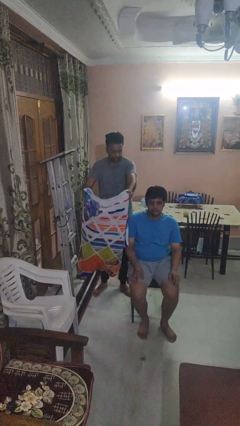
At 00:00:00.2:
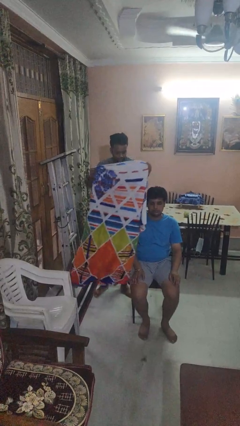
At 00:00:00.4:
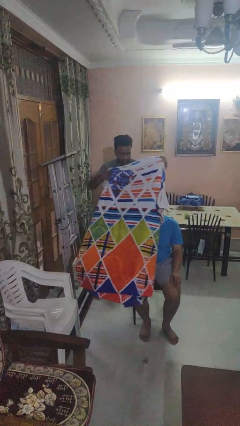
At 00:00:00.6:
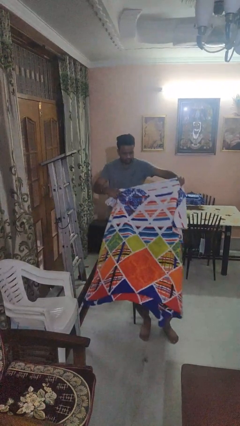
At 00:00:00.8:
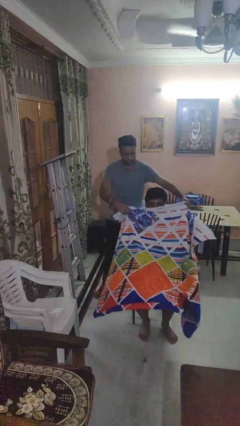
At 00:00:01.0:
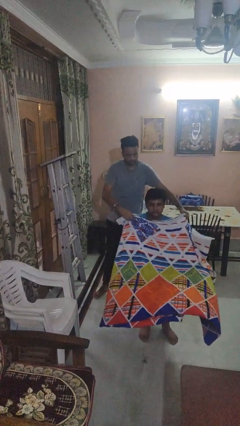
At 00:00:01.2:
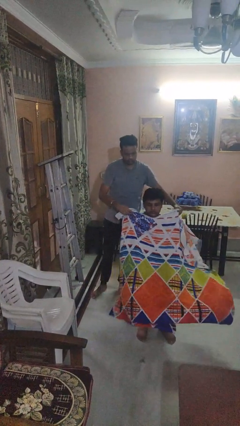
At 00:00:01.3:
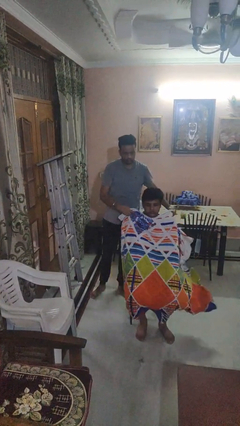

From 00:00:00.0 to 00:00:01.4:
person covers friend with blanket

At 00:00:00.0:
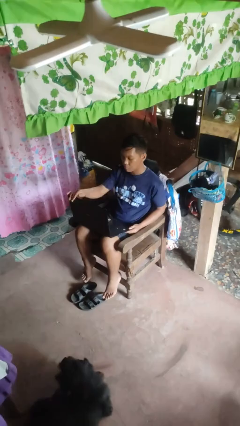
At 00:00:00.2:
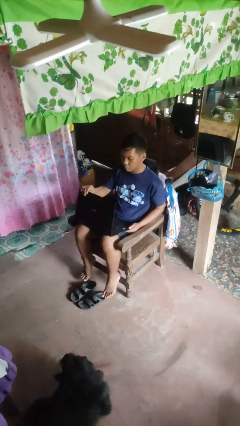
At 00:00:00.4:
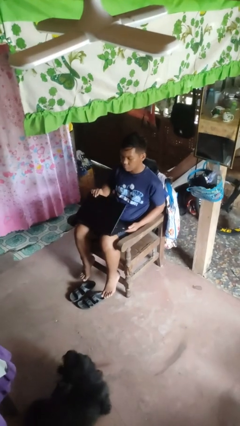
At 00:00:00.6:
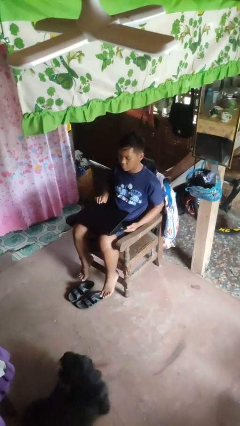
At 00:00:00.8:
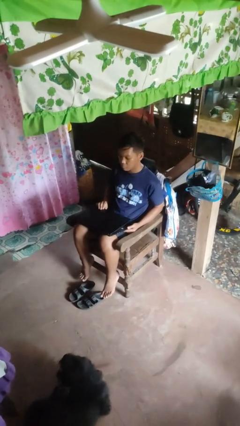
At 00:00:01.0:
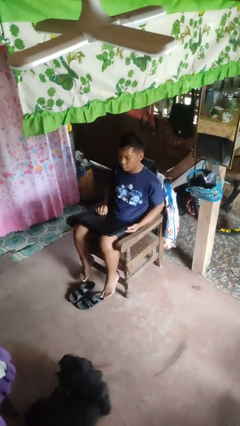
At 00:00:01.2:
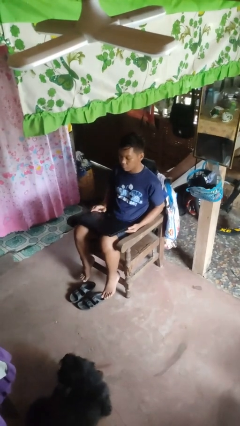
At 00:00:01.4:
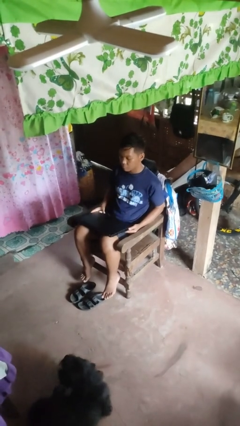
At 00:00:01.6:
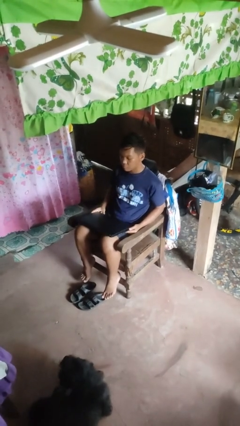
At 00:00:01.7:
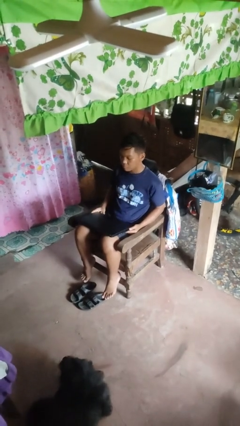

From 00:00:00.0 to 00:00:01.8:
person closes laptop

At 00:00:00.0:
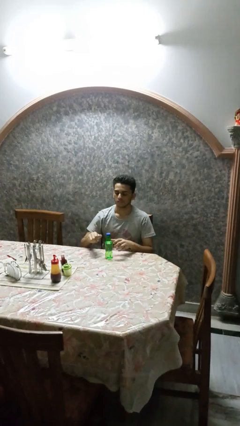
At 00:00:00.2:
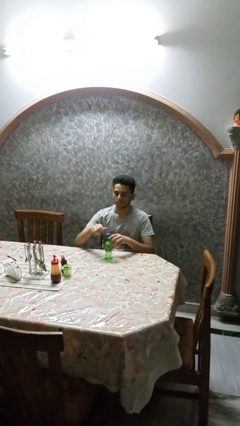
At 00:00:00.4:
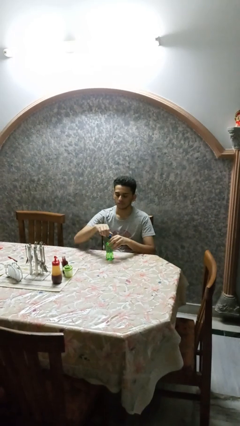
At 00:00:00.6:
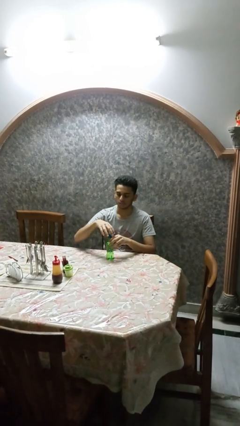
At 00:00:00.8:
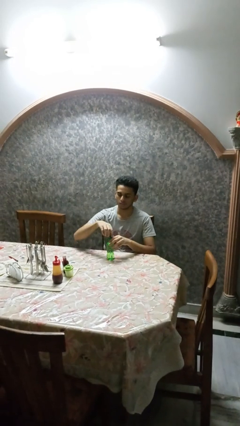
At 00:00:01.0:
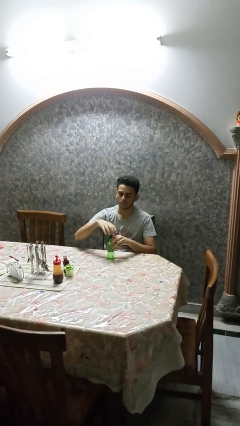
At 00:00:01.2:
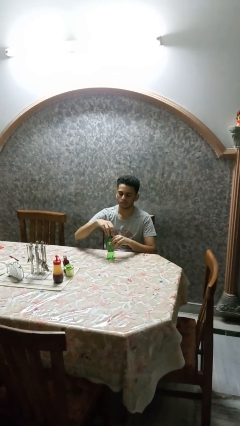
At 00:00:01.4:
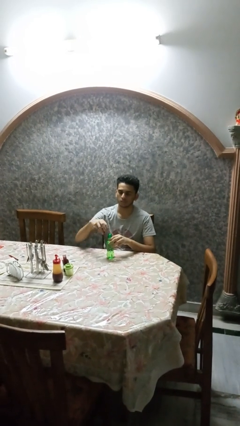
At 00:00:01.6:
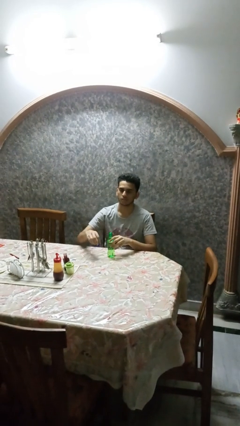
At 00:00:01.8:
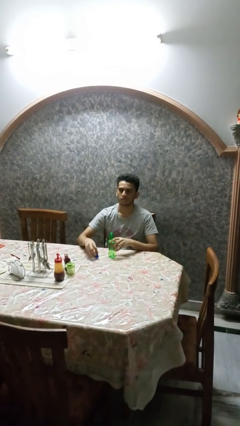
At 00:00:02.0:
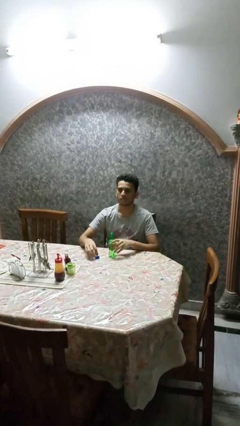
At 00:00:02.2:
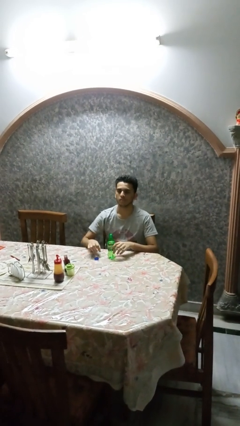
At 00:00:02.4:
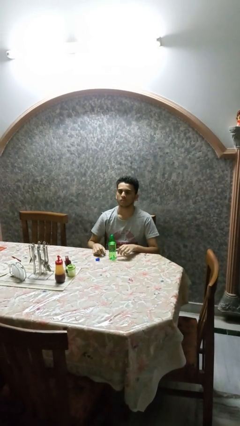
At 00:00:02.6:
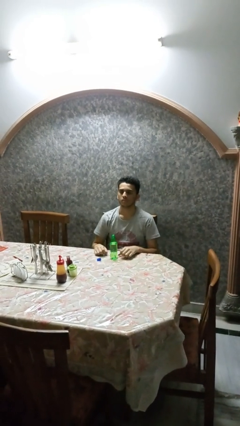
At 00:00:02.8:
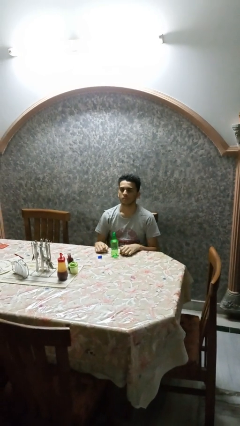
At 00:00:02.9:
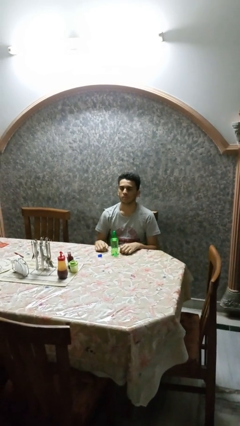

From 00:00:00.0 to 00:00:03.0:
person unscrews lid from bottle

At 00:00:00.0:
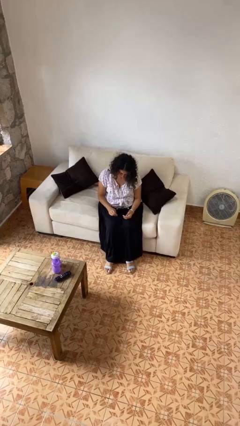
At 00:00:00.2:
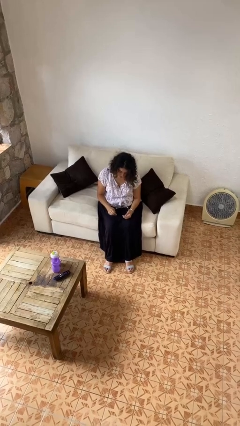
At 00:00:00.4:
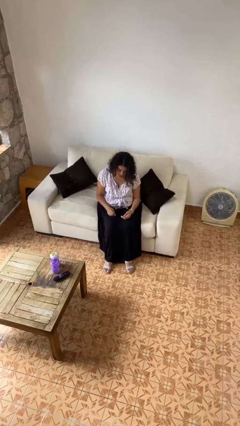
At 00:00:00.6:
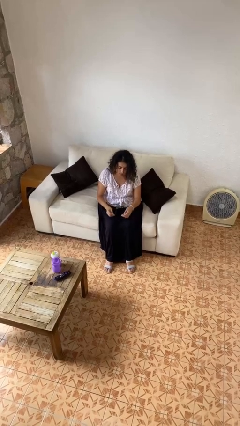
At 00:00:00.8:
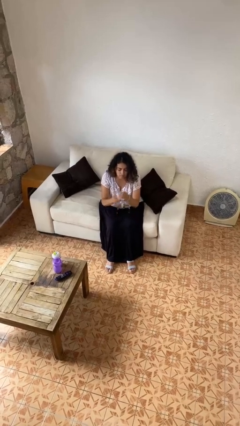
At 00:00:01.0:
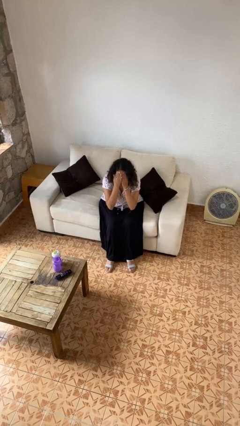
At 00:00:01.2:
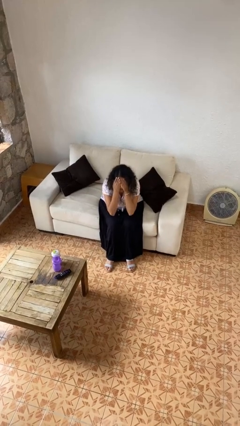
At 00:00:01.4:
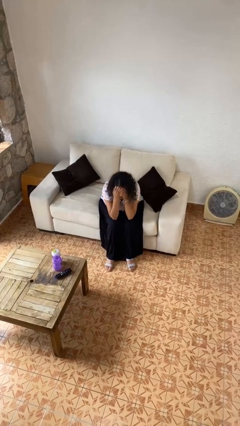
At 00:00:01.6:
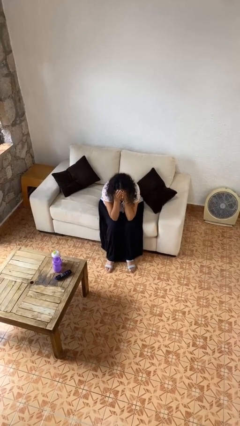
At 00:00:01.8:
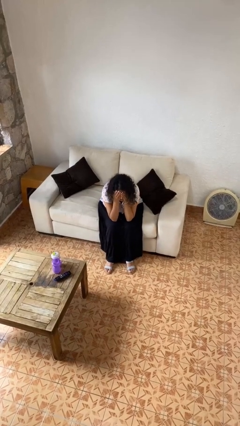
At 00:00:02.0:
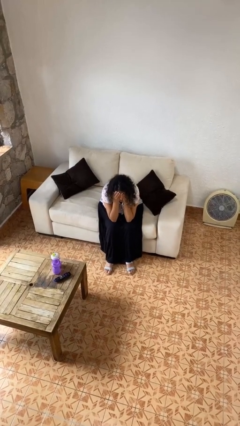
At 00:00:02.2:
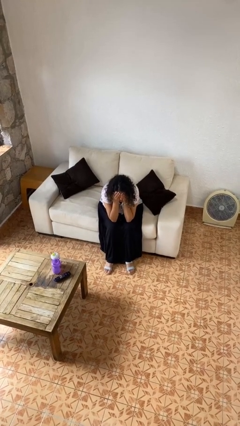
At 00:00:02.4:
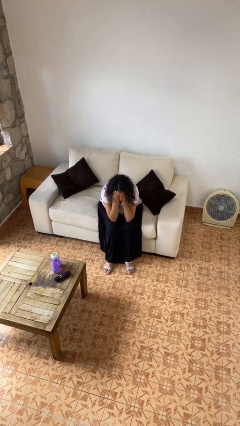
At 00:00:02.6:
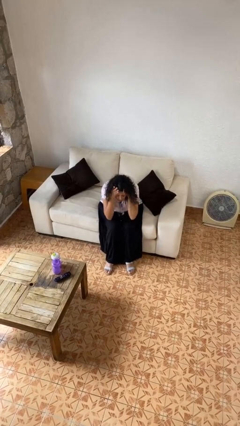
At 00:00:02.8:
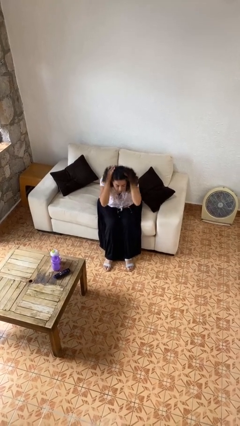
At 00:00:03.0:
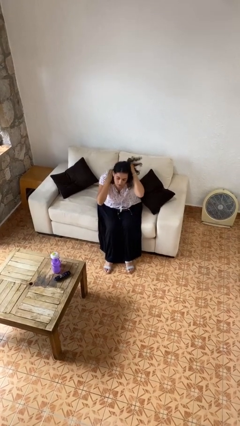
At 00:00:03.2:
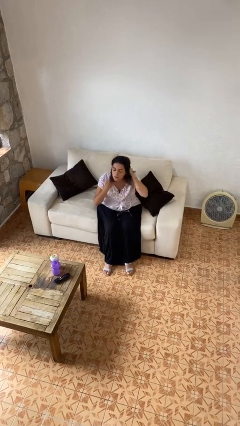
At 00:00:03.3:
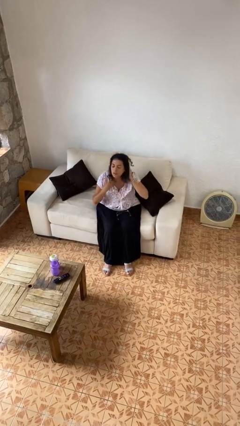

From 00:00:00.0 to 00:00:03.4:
person covers face with hands

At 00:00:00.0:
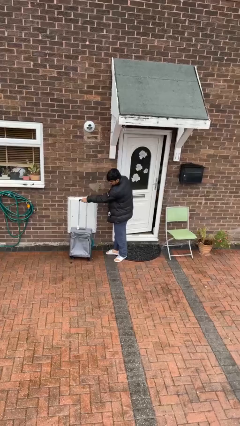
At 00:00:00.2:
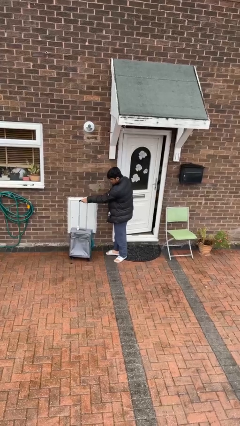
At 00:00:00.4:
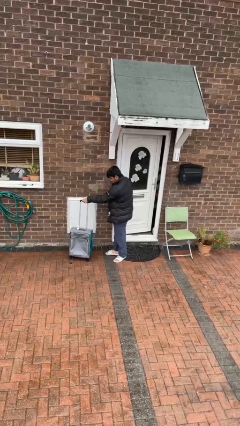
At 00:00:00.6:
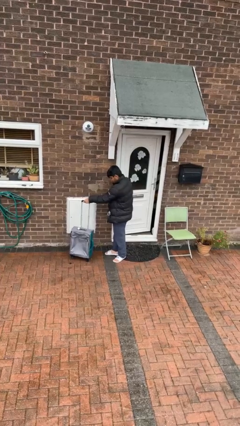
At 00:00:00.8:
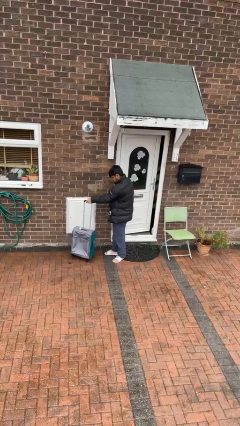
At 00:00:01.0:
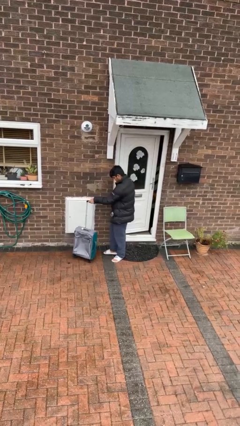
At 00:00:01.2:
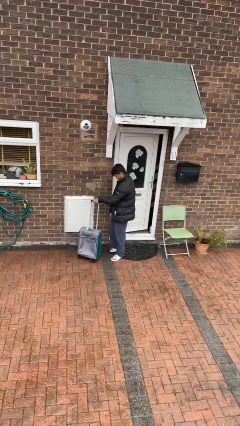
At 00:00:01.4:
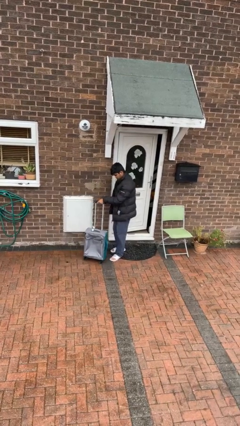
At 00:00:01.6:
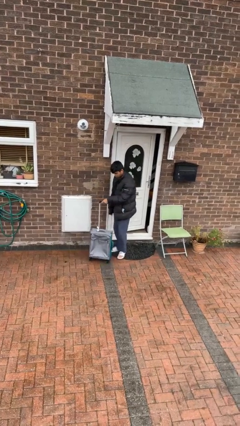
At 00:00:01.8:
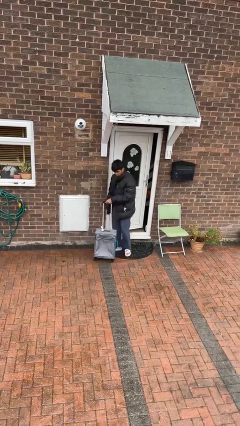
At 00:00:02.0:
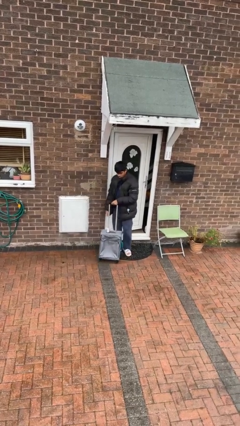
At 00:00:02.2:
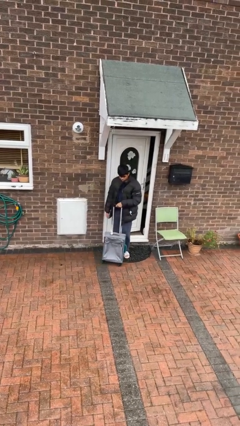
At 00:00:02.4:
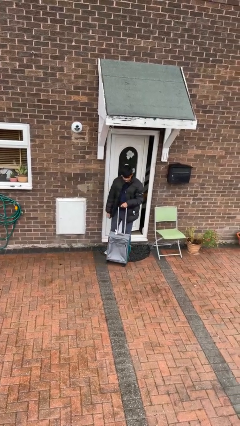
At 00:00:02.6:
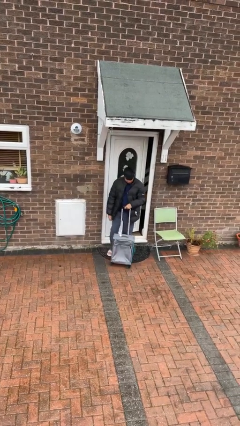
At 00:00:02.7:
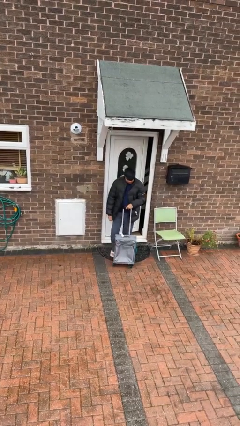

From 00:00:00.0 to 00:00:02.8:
person pulls wheeled cart

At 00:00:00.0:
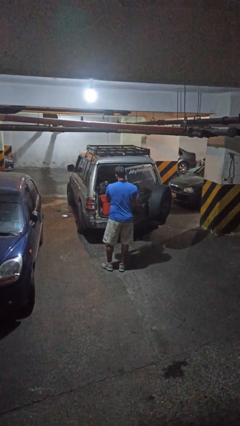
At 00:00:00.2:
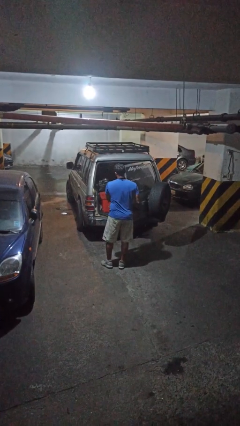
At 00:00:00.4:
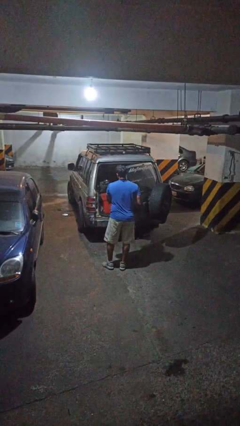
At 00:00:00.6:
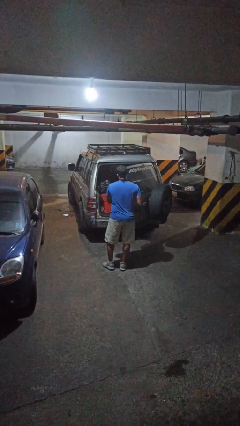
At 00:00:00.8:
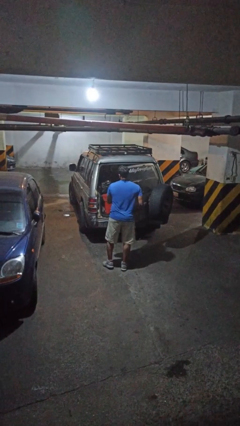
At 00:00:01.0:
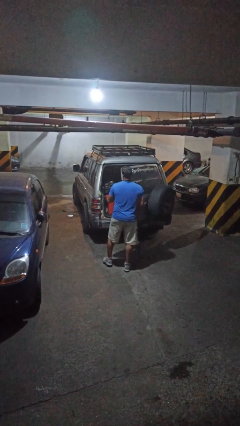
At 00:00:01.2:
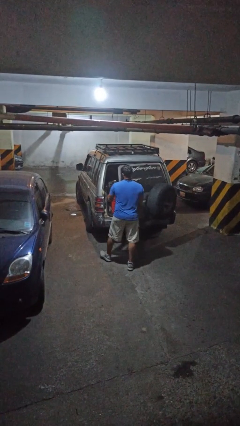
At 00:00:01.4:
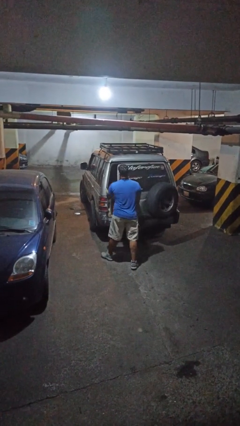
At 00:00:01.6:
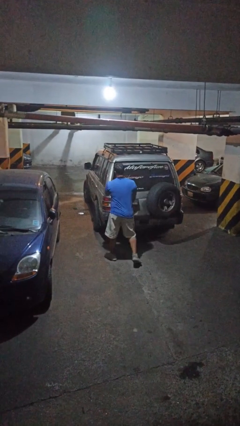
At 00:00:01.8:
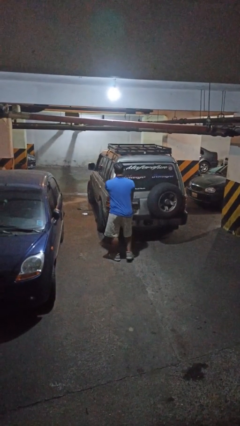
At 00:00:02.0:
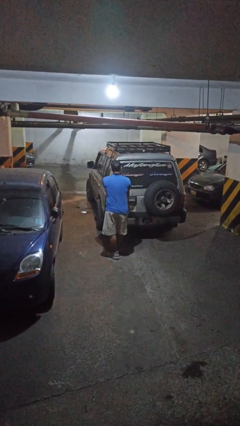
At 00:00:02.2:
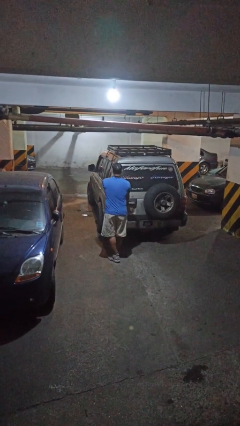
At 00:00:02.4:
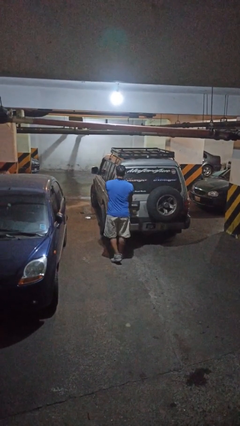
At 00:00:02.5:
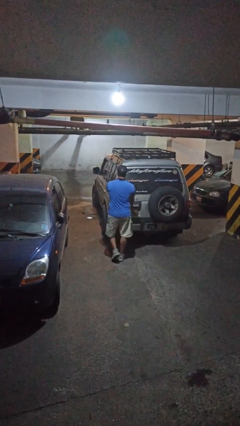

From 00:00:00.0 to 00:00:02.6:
person closes car trunk

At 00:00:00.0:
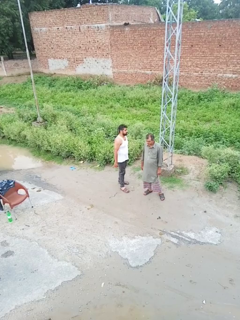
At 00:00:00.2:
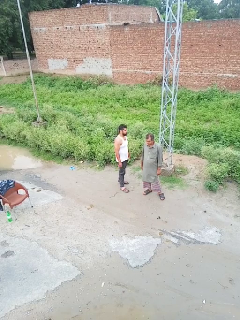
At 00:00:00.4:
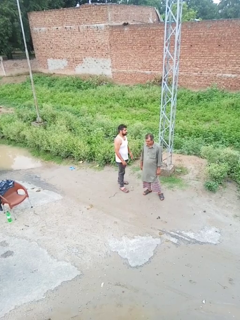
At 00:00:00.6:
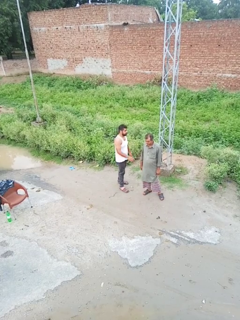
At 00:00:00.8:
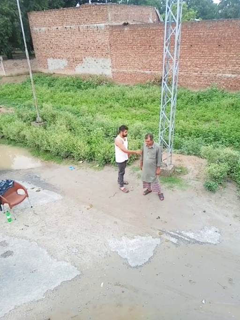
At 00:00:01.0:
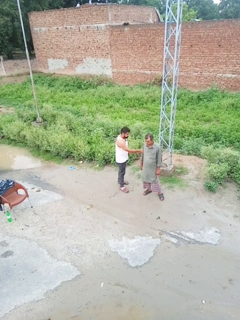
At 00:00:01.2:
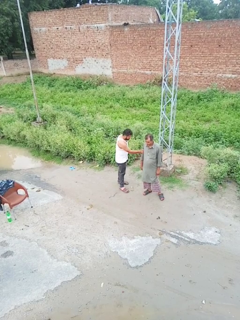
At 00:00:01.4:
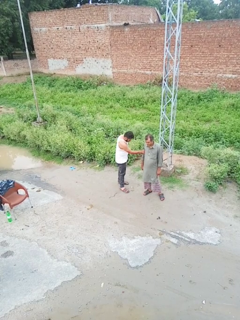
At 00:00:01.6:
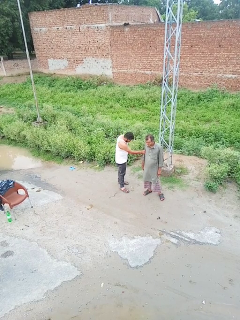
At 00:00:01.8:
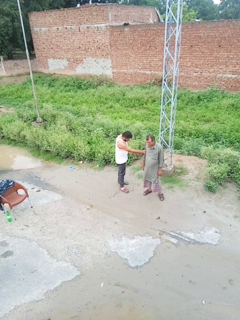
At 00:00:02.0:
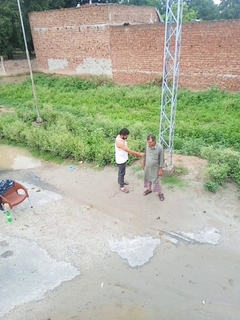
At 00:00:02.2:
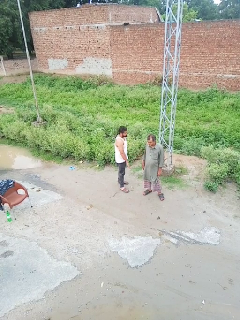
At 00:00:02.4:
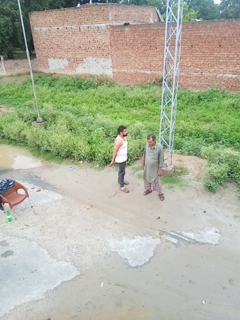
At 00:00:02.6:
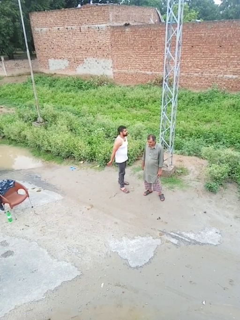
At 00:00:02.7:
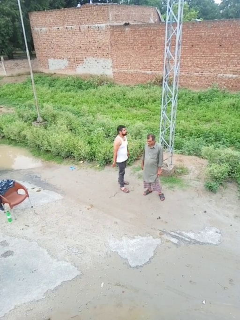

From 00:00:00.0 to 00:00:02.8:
person grabs person by bicep
